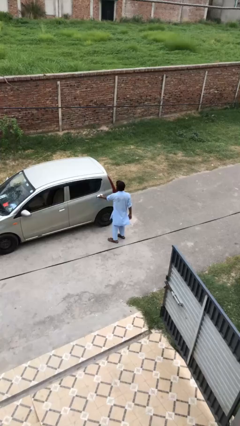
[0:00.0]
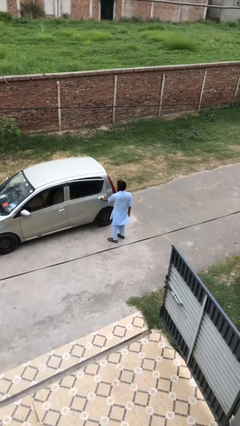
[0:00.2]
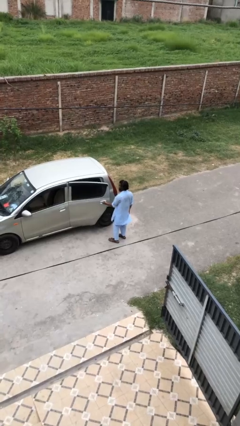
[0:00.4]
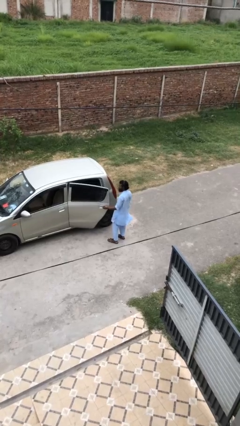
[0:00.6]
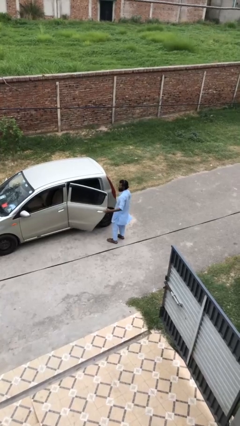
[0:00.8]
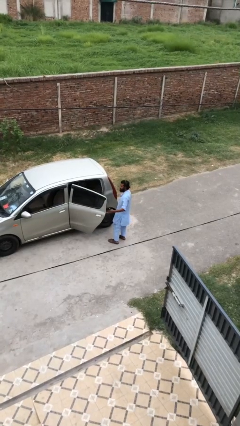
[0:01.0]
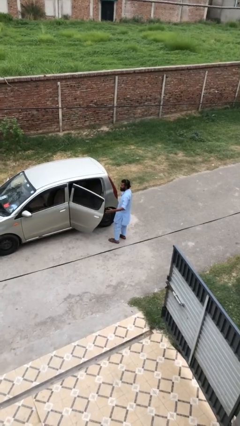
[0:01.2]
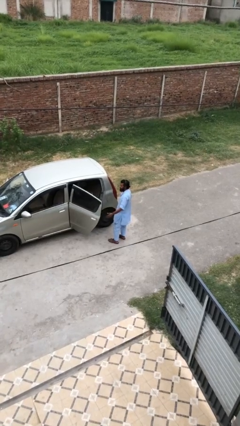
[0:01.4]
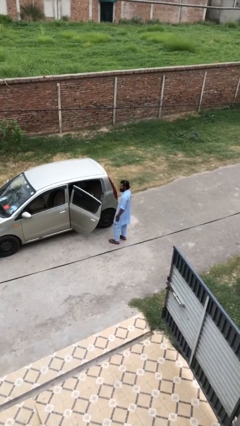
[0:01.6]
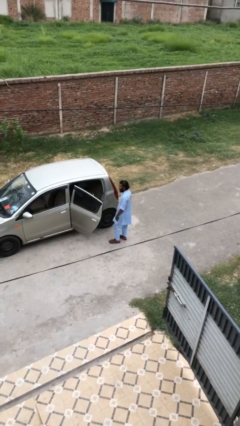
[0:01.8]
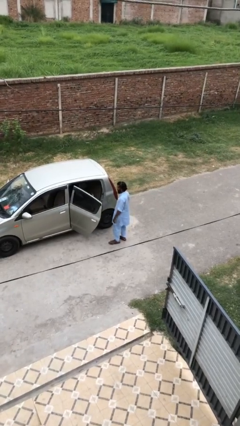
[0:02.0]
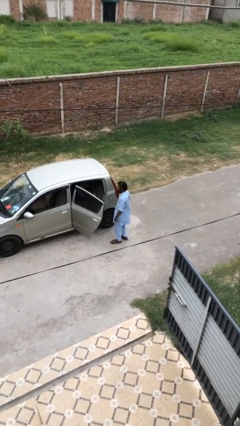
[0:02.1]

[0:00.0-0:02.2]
person opens car door

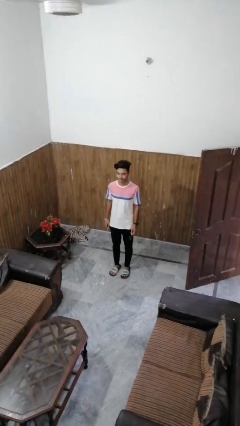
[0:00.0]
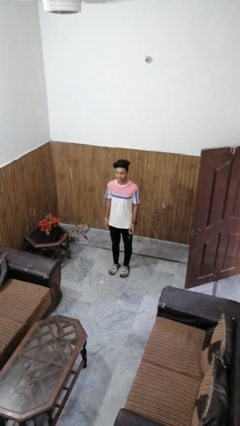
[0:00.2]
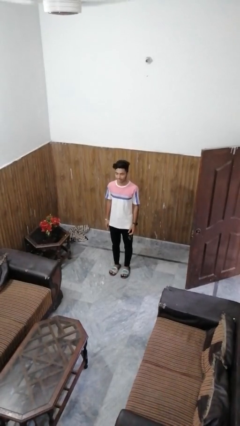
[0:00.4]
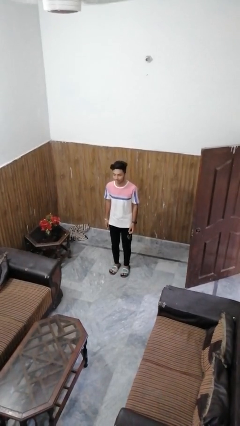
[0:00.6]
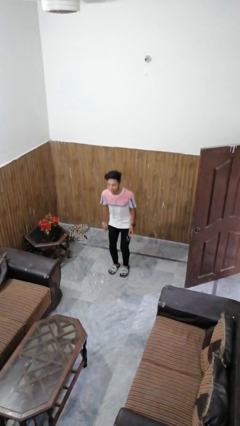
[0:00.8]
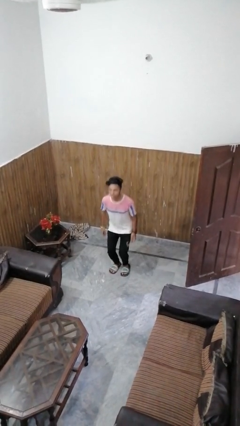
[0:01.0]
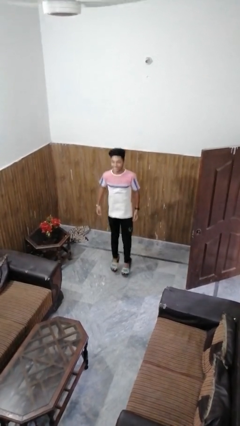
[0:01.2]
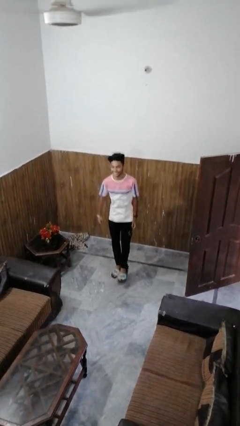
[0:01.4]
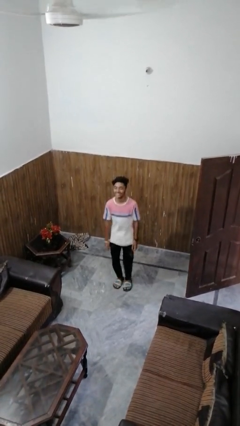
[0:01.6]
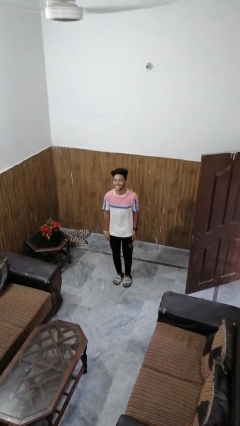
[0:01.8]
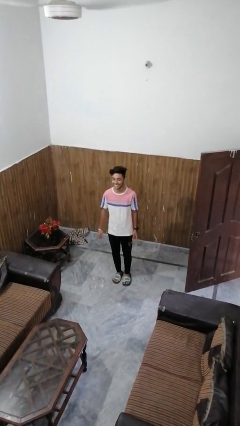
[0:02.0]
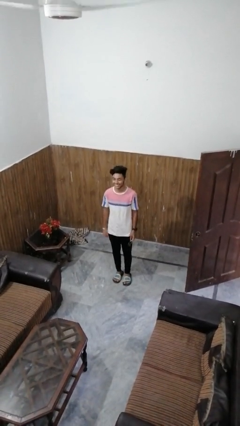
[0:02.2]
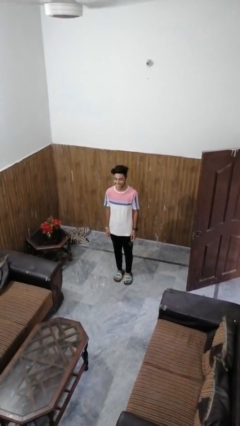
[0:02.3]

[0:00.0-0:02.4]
person jumps

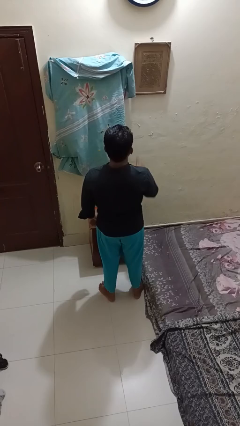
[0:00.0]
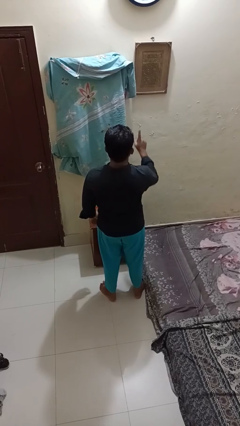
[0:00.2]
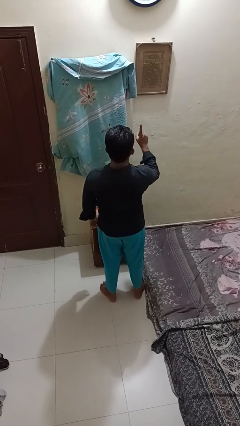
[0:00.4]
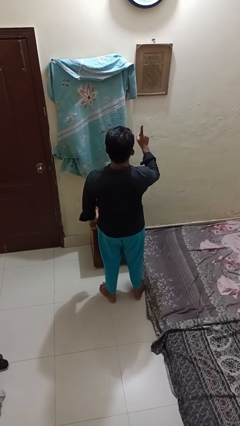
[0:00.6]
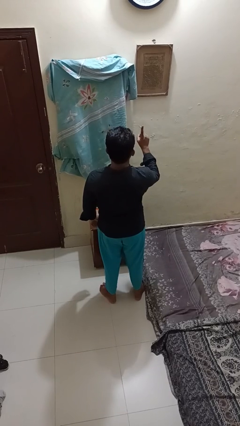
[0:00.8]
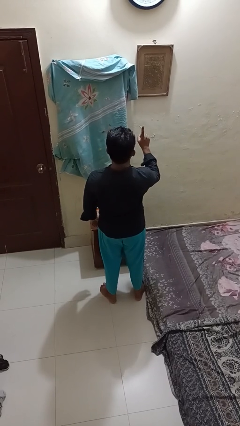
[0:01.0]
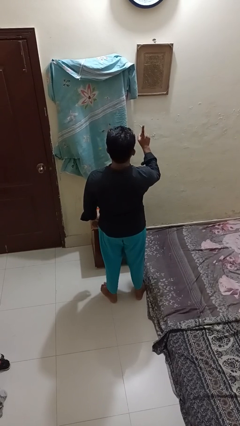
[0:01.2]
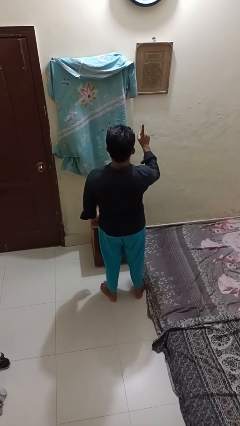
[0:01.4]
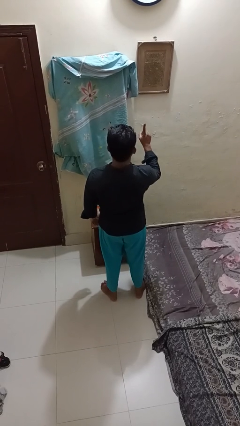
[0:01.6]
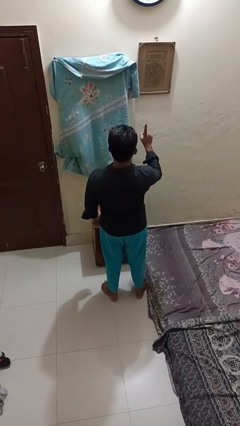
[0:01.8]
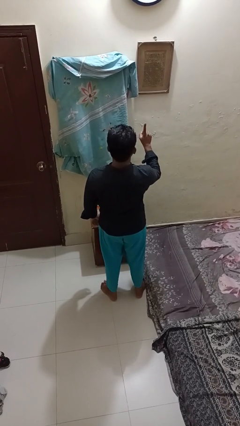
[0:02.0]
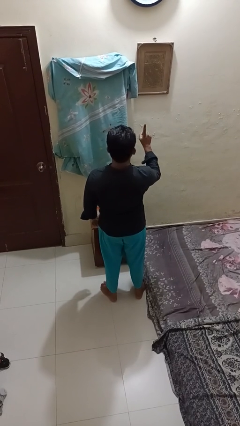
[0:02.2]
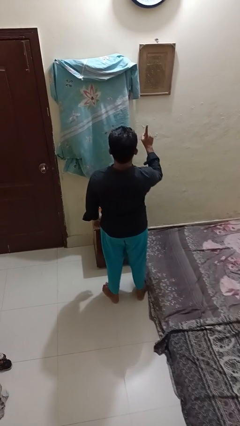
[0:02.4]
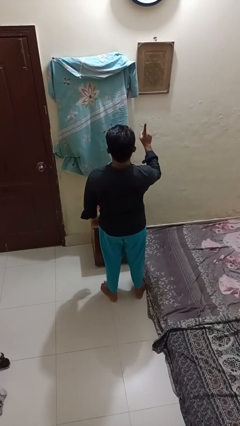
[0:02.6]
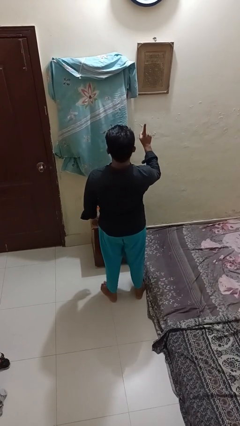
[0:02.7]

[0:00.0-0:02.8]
person gestures number one

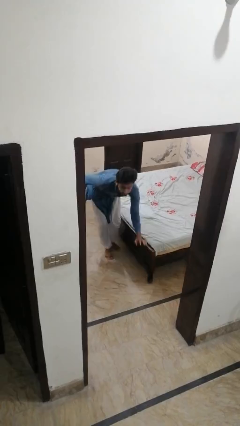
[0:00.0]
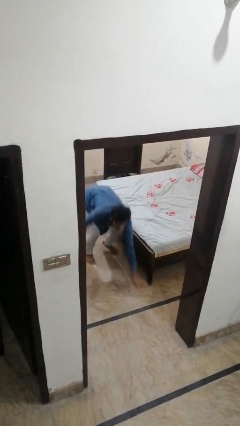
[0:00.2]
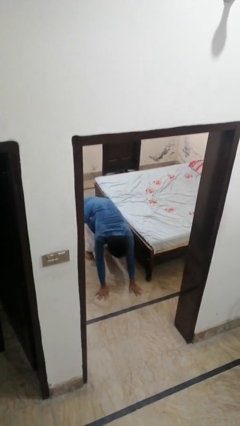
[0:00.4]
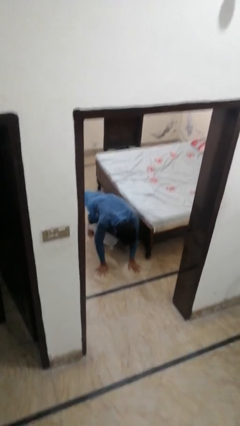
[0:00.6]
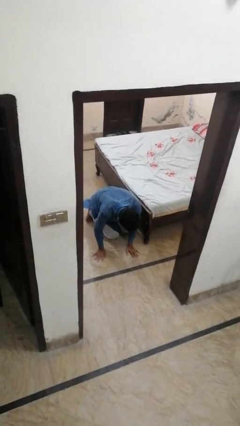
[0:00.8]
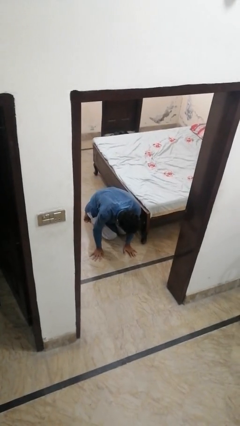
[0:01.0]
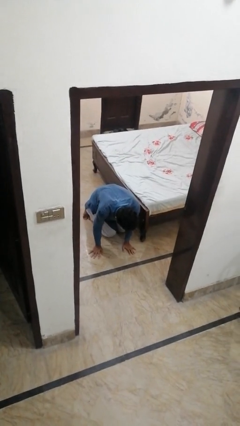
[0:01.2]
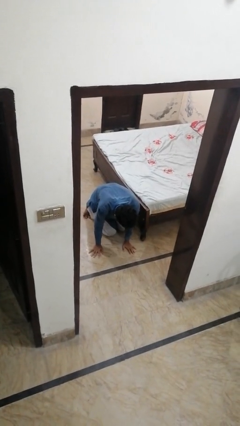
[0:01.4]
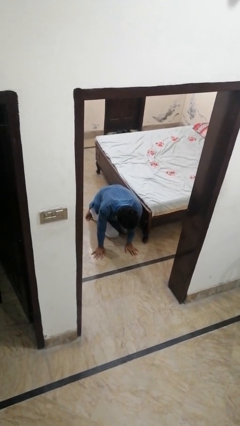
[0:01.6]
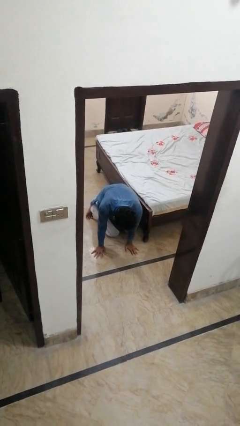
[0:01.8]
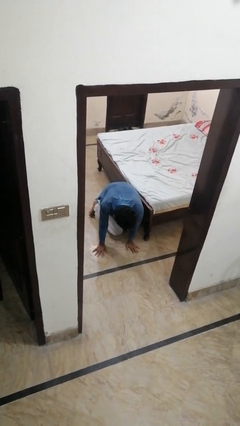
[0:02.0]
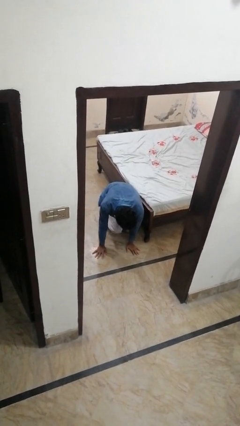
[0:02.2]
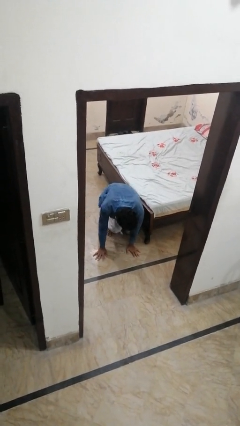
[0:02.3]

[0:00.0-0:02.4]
person falls from bed

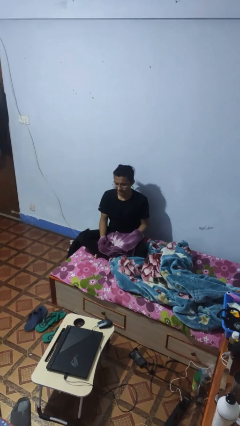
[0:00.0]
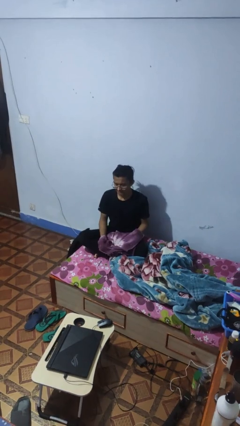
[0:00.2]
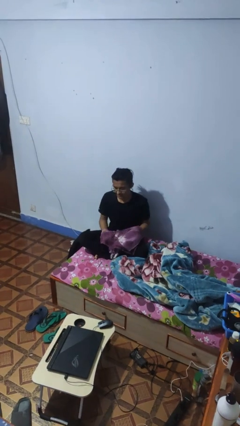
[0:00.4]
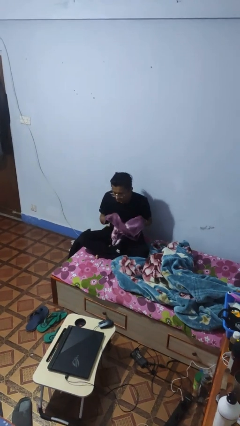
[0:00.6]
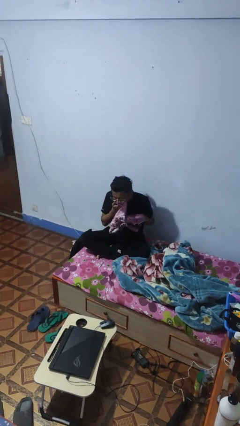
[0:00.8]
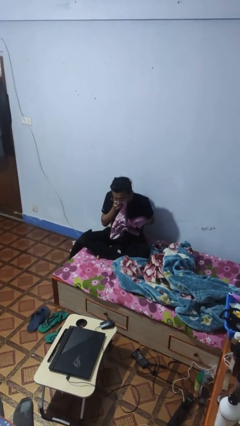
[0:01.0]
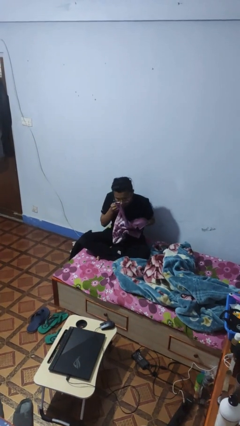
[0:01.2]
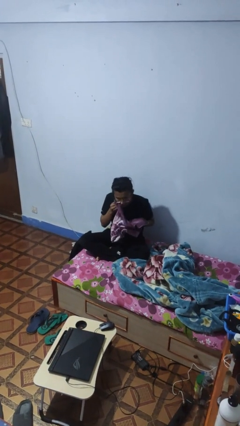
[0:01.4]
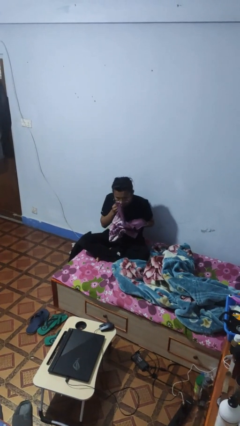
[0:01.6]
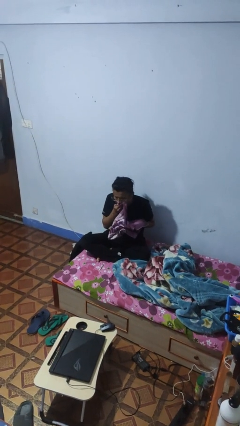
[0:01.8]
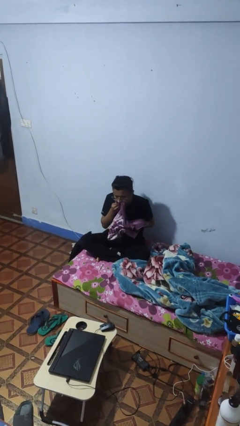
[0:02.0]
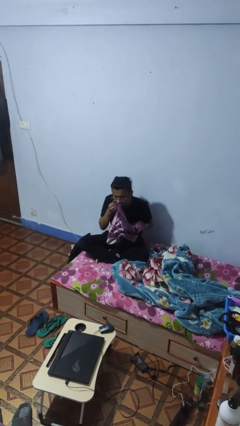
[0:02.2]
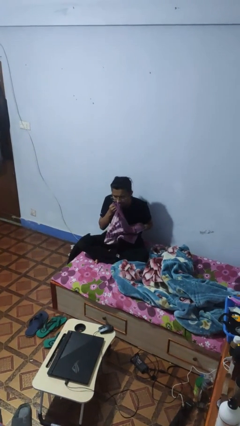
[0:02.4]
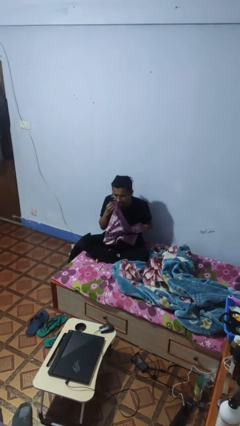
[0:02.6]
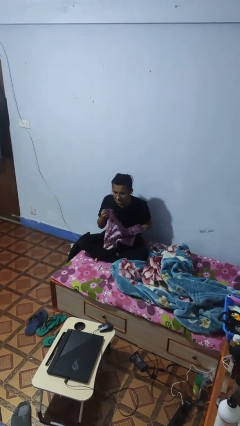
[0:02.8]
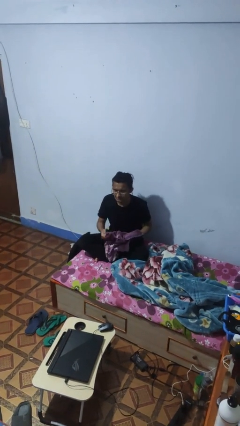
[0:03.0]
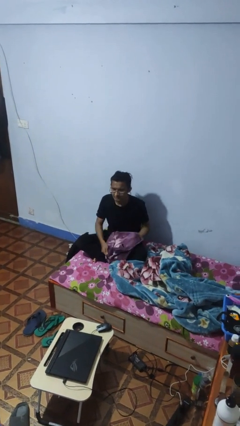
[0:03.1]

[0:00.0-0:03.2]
person wipes mouth with napkin

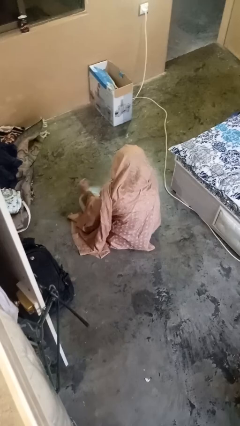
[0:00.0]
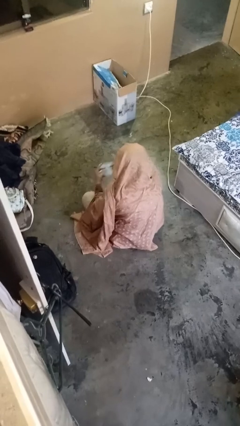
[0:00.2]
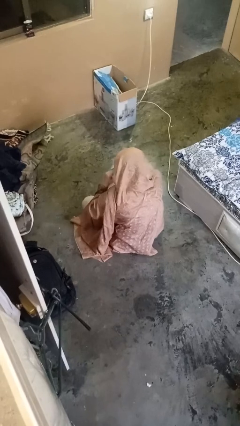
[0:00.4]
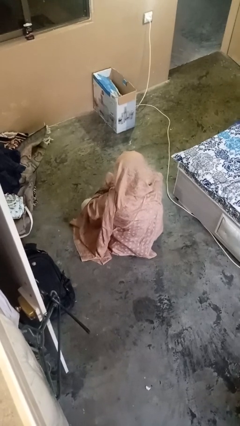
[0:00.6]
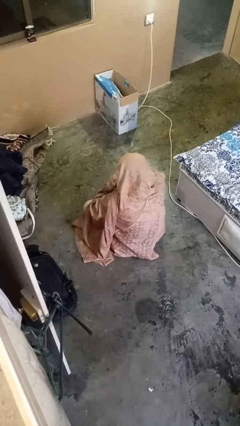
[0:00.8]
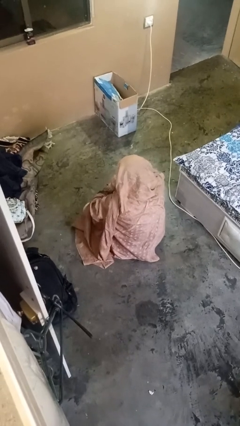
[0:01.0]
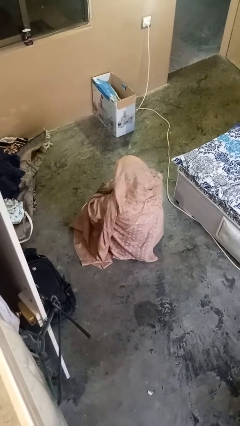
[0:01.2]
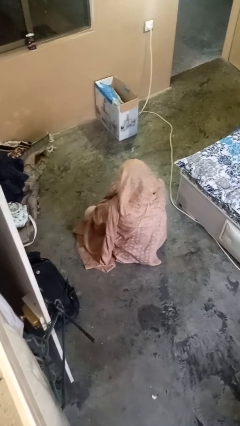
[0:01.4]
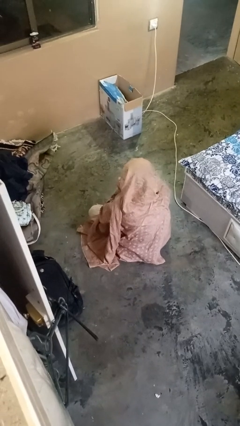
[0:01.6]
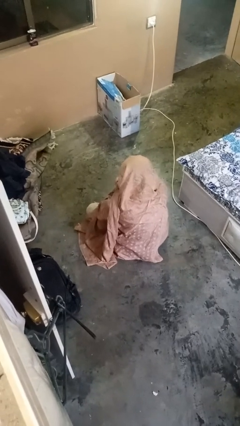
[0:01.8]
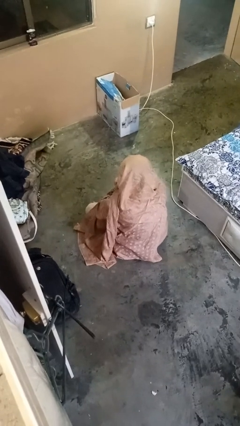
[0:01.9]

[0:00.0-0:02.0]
person puts on facemask

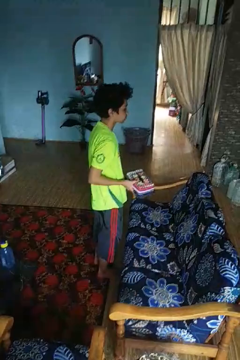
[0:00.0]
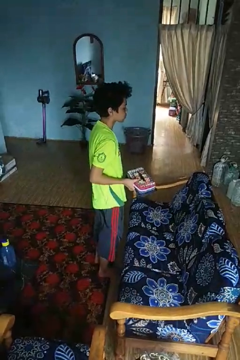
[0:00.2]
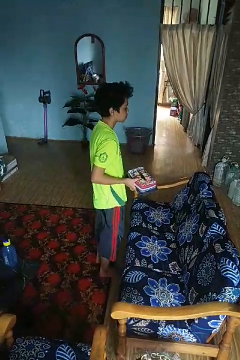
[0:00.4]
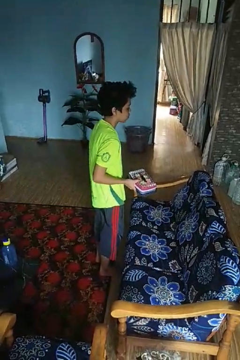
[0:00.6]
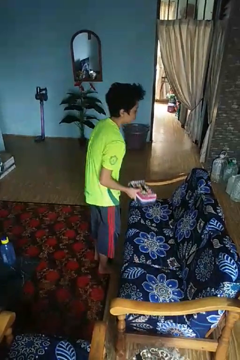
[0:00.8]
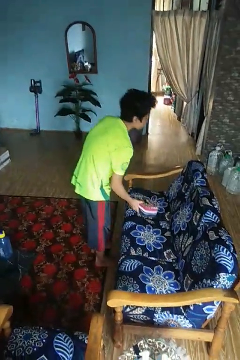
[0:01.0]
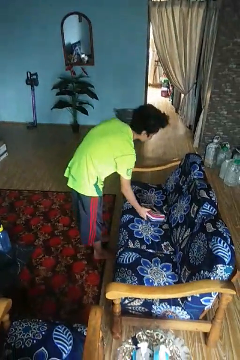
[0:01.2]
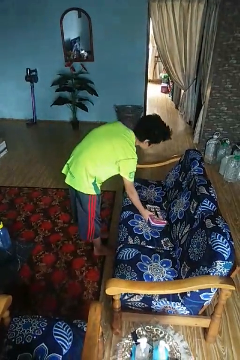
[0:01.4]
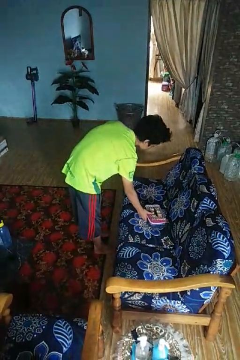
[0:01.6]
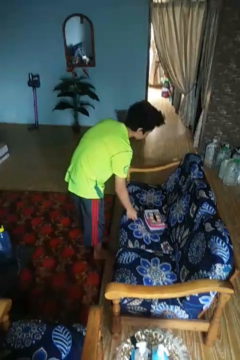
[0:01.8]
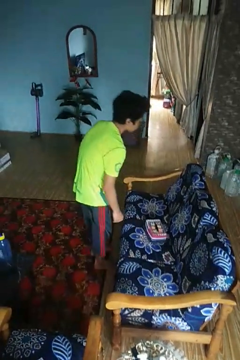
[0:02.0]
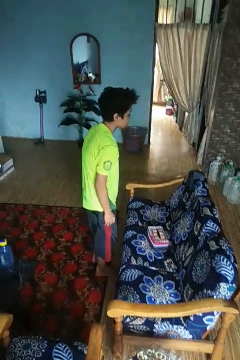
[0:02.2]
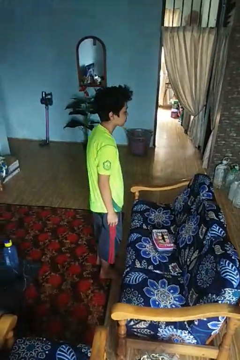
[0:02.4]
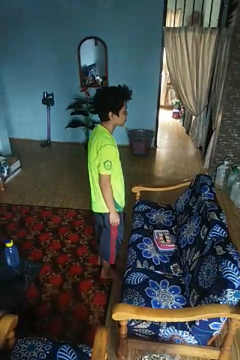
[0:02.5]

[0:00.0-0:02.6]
person puts down object on couch
